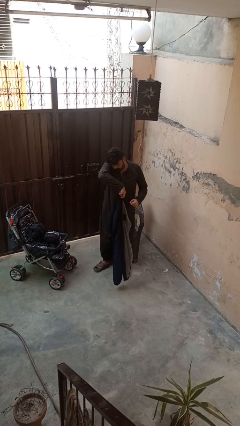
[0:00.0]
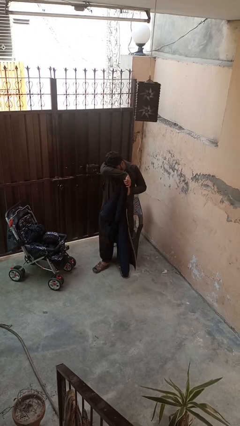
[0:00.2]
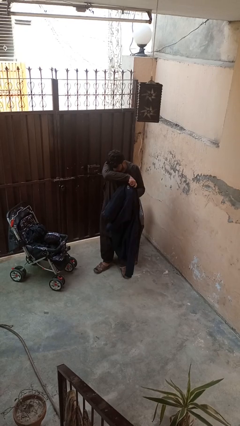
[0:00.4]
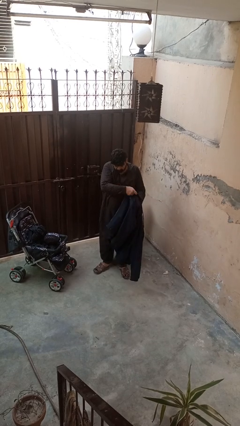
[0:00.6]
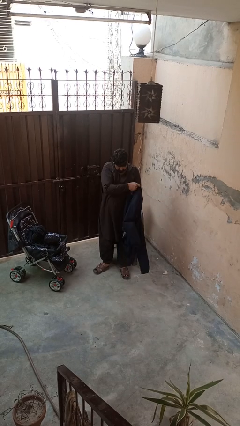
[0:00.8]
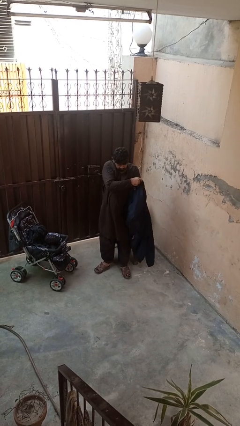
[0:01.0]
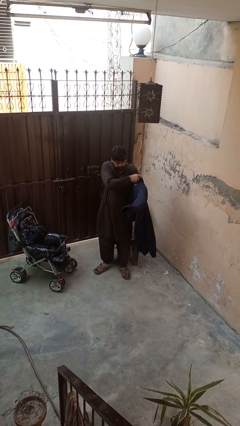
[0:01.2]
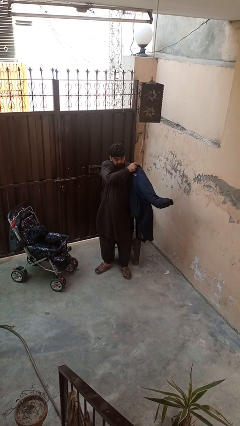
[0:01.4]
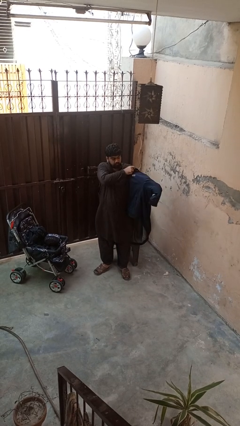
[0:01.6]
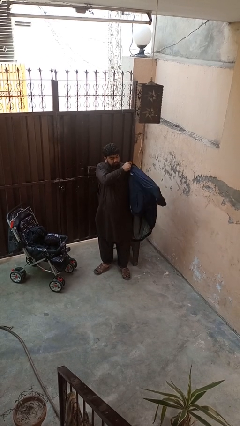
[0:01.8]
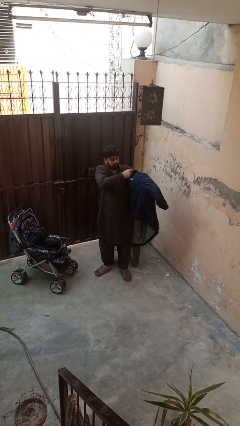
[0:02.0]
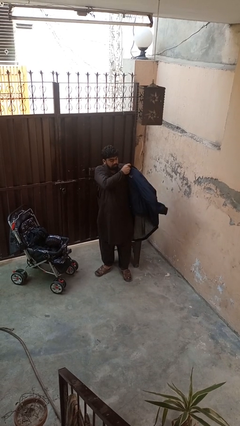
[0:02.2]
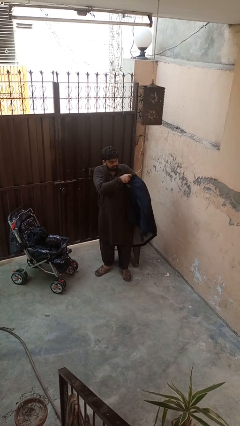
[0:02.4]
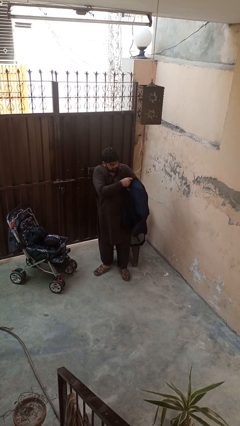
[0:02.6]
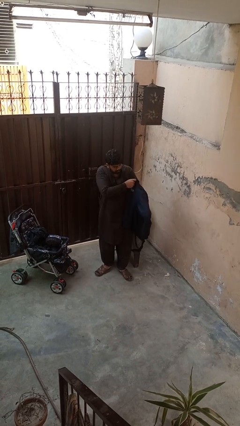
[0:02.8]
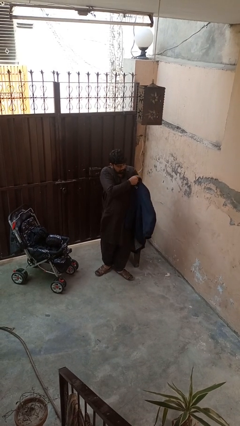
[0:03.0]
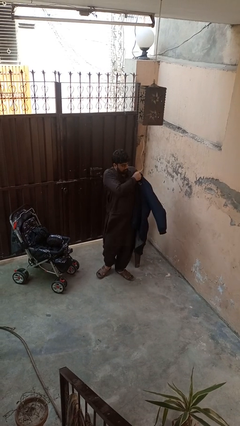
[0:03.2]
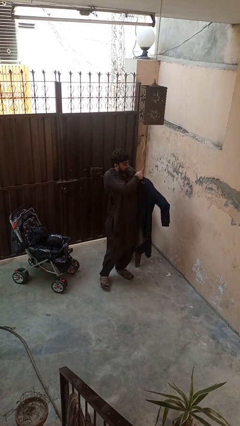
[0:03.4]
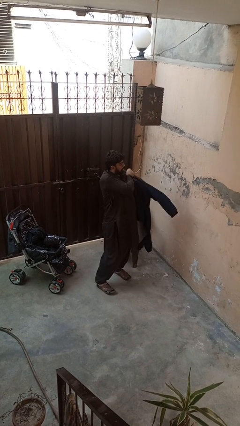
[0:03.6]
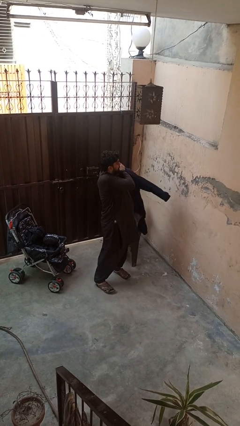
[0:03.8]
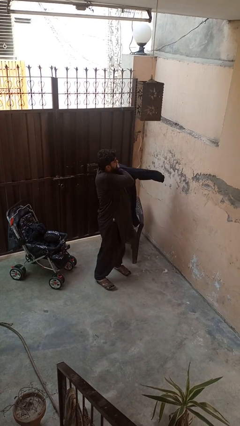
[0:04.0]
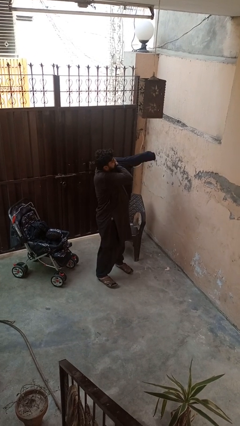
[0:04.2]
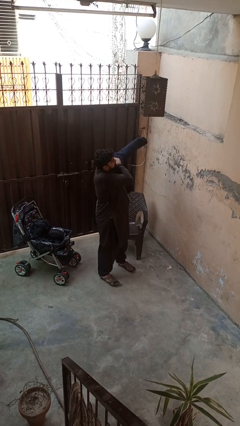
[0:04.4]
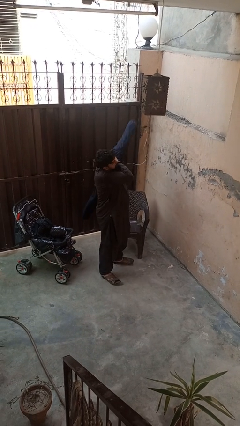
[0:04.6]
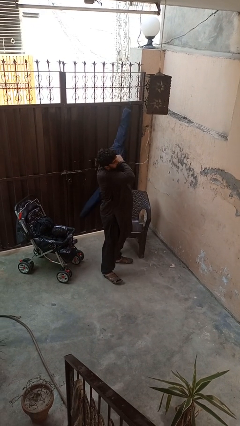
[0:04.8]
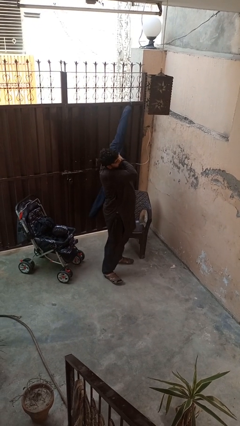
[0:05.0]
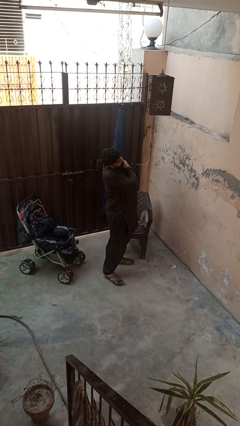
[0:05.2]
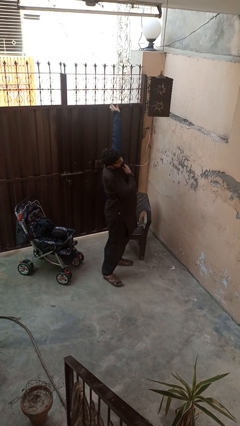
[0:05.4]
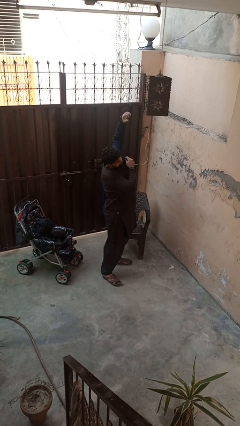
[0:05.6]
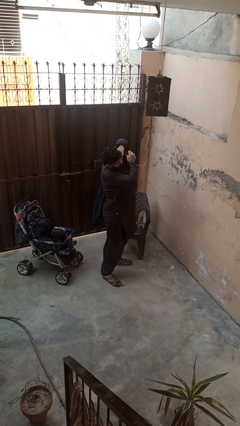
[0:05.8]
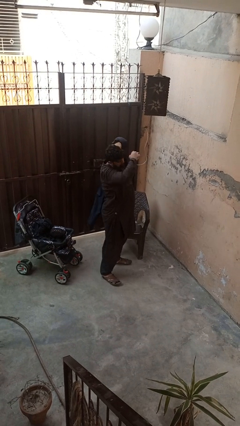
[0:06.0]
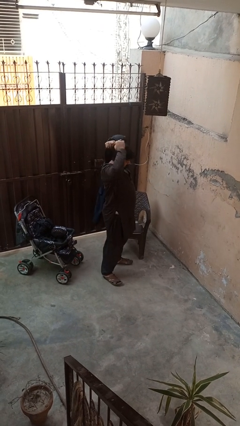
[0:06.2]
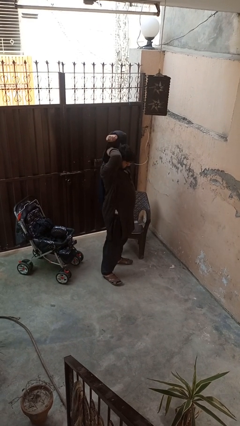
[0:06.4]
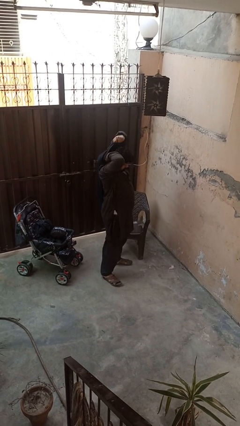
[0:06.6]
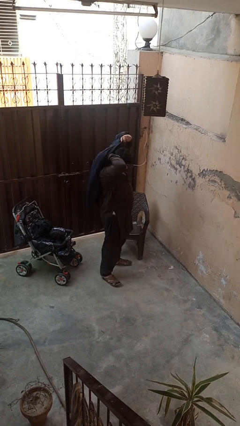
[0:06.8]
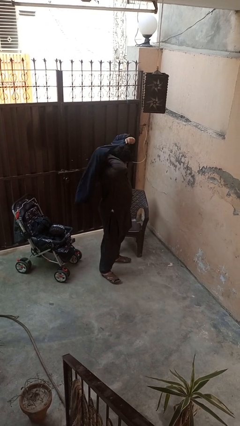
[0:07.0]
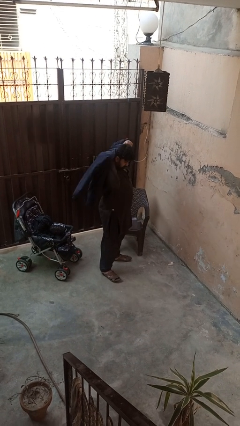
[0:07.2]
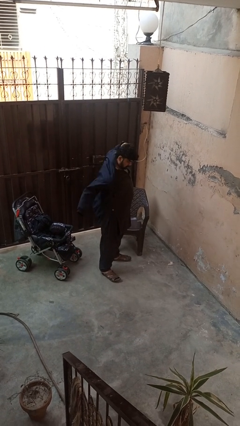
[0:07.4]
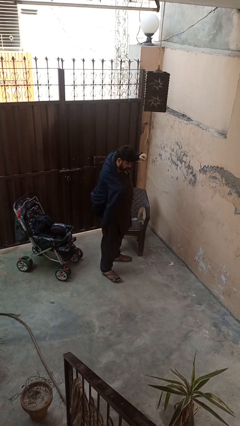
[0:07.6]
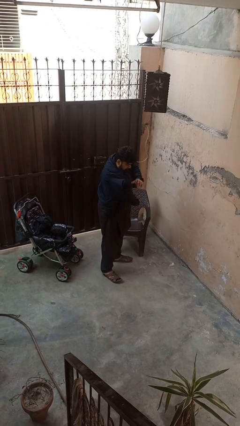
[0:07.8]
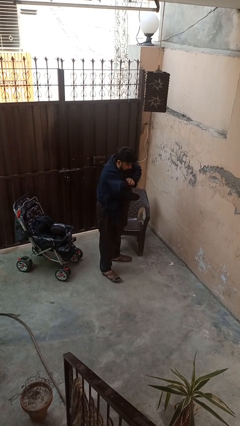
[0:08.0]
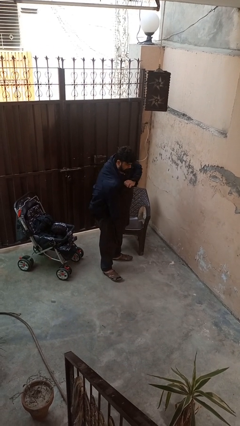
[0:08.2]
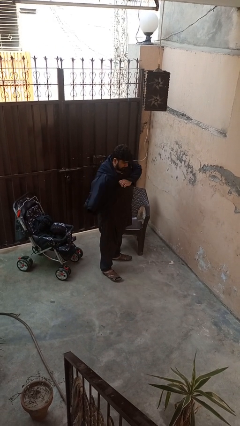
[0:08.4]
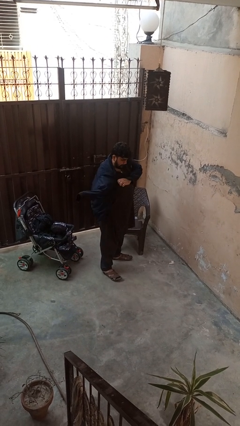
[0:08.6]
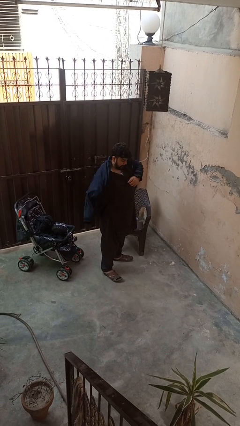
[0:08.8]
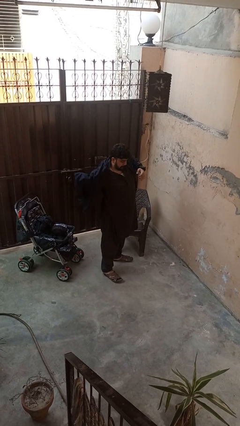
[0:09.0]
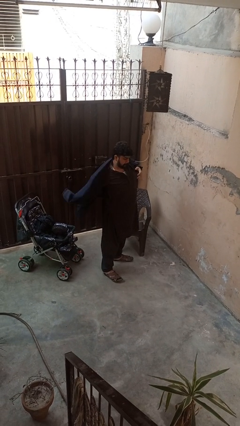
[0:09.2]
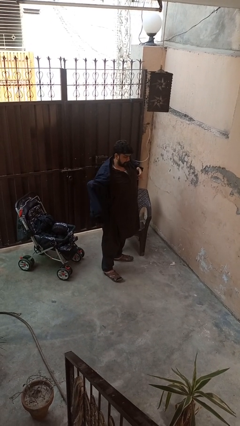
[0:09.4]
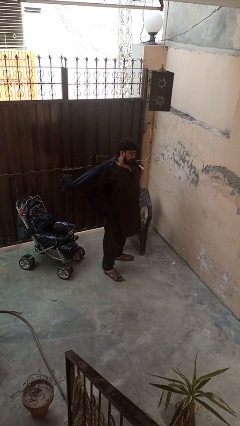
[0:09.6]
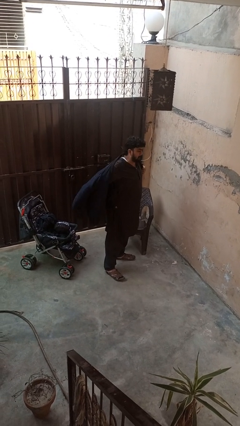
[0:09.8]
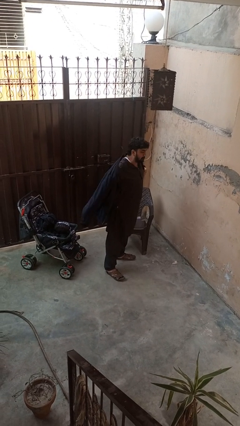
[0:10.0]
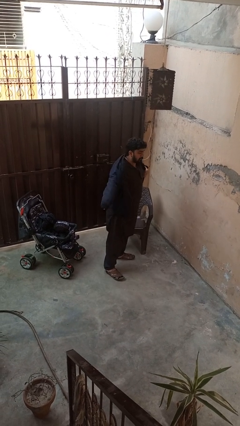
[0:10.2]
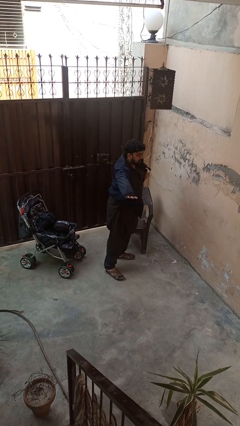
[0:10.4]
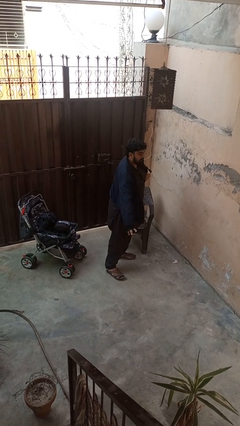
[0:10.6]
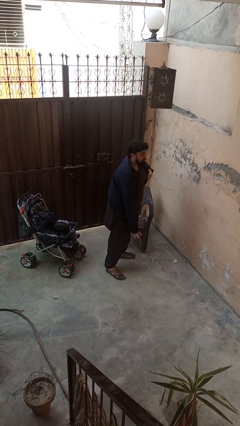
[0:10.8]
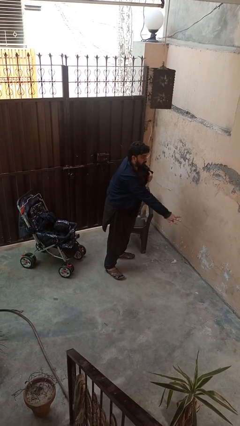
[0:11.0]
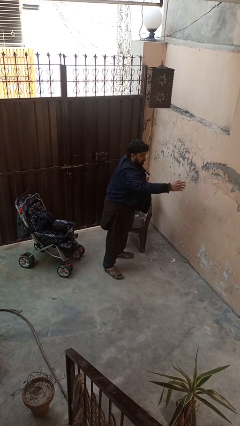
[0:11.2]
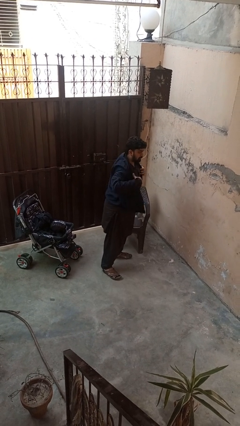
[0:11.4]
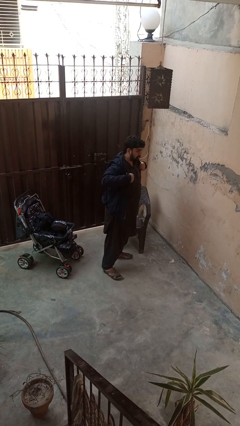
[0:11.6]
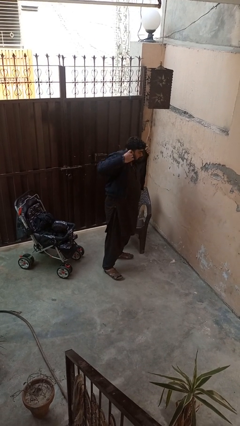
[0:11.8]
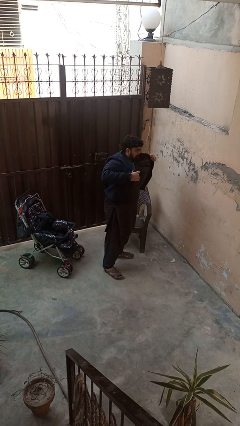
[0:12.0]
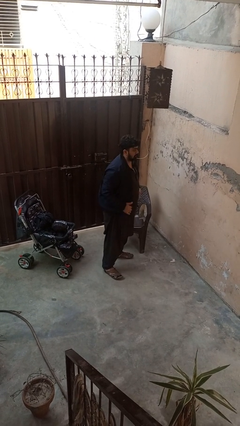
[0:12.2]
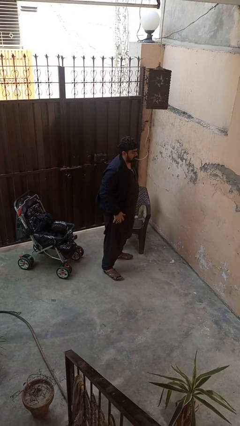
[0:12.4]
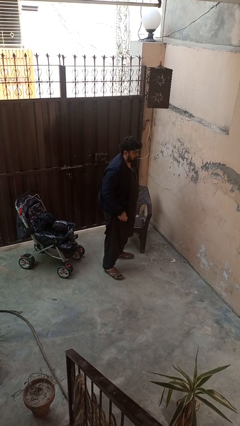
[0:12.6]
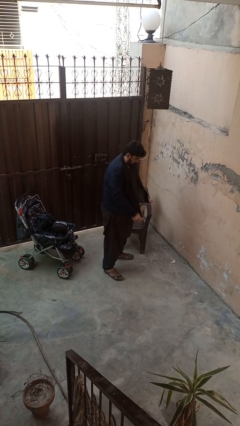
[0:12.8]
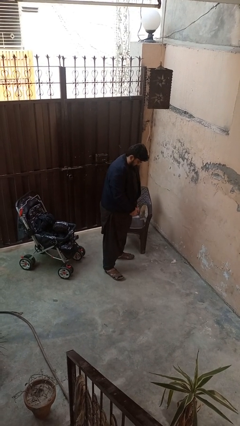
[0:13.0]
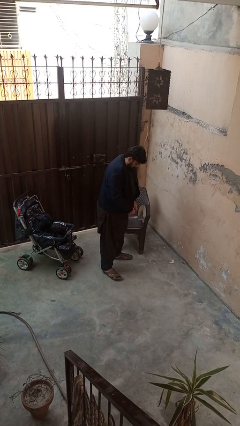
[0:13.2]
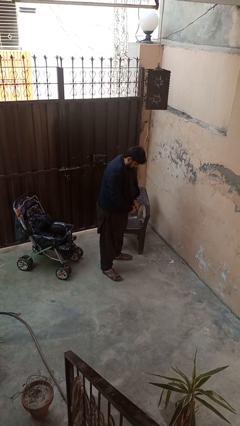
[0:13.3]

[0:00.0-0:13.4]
person puts on jacket

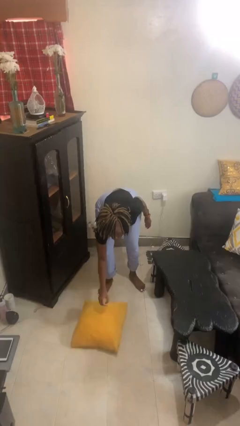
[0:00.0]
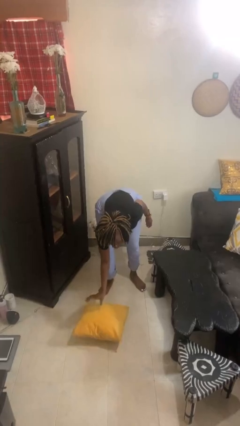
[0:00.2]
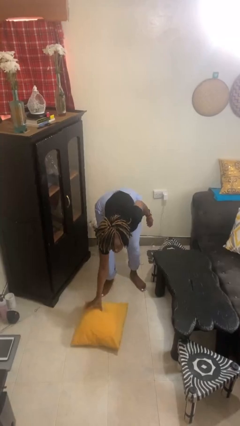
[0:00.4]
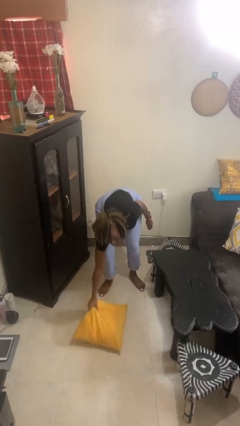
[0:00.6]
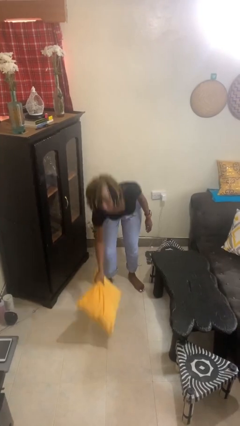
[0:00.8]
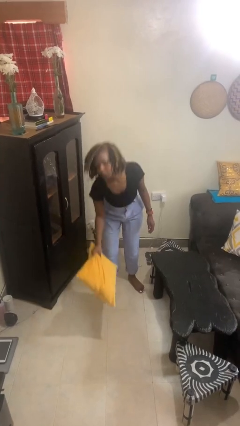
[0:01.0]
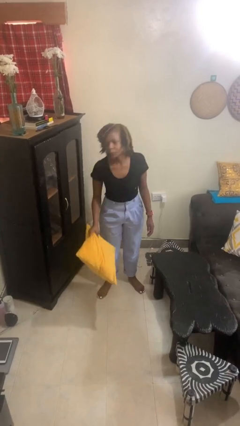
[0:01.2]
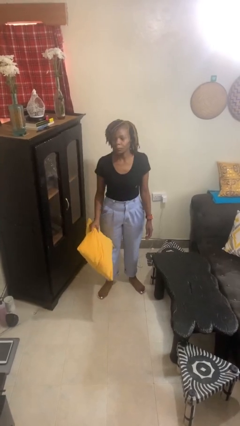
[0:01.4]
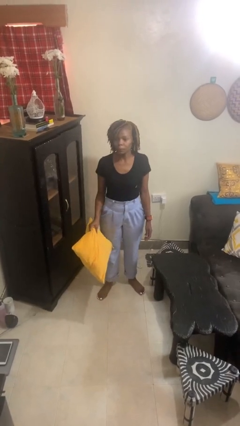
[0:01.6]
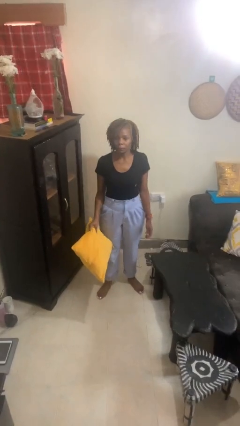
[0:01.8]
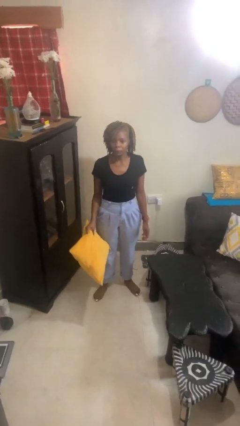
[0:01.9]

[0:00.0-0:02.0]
person picks up object from floor

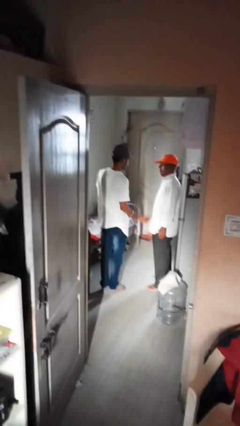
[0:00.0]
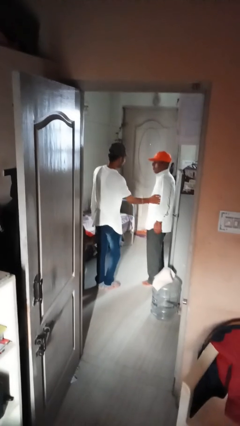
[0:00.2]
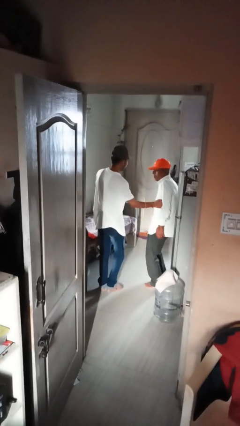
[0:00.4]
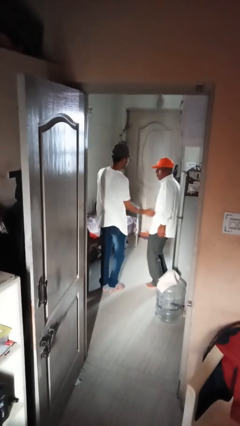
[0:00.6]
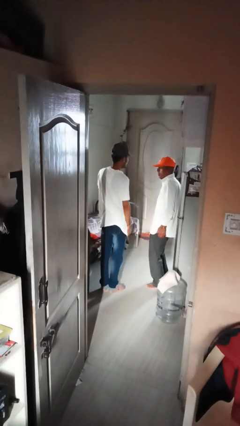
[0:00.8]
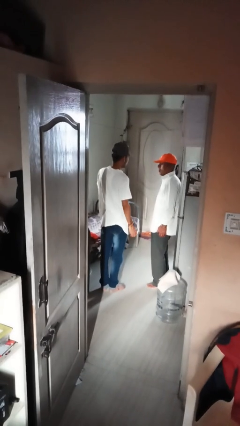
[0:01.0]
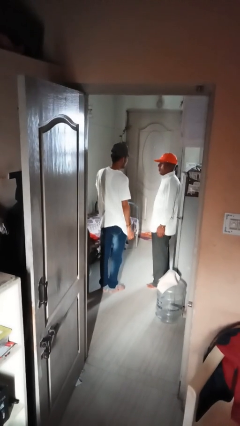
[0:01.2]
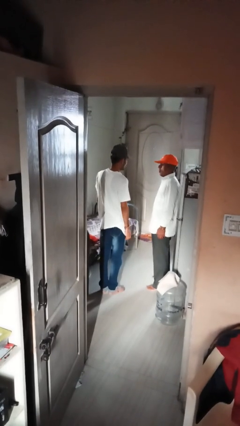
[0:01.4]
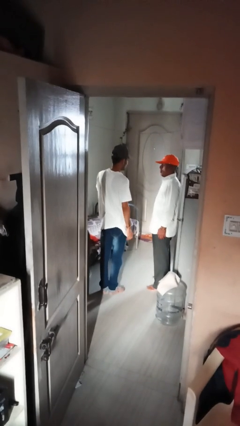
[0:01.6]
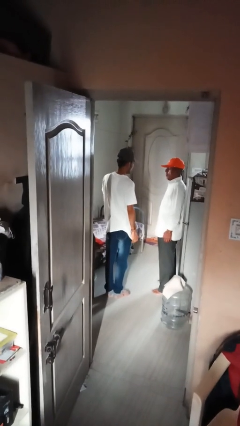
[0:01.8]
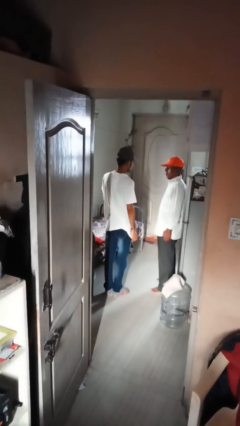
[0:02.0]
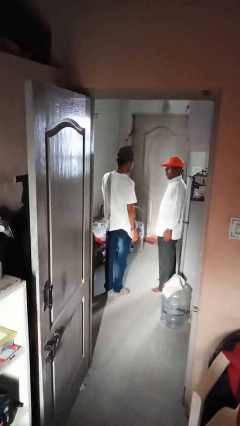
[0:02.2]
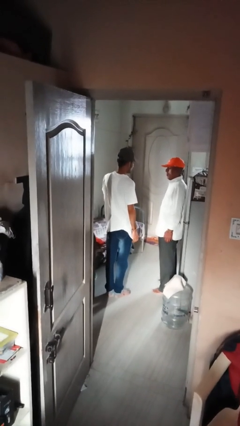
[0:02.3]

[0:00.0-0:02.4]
person tickles person

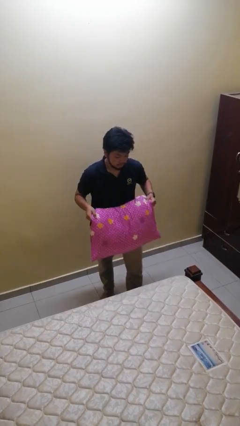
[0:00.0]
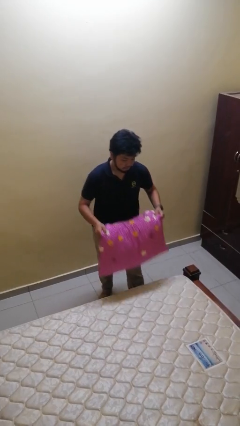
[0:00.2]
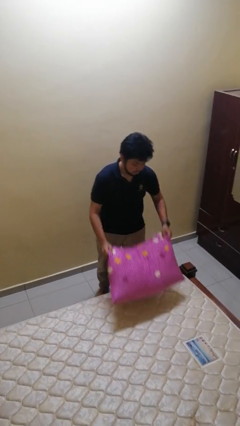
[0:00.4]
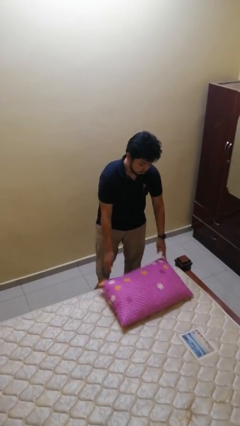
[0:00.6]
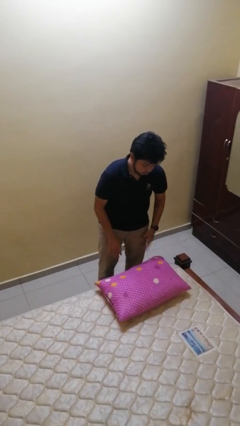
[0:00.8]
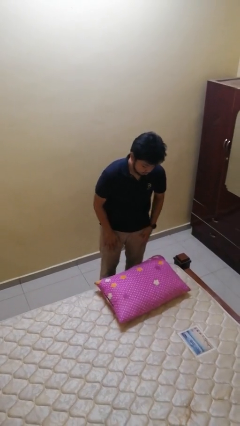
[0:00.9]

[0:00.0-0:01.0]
person puts down object on bed
